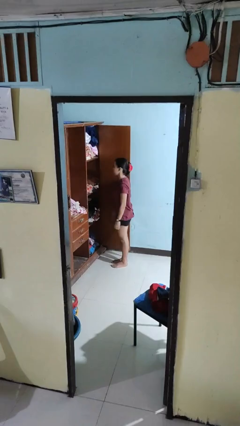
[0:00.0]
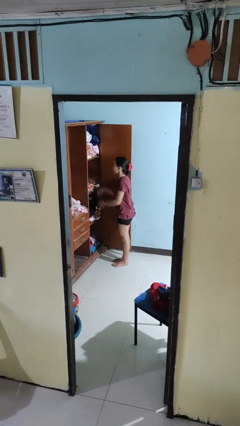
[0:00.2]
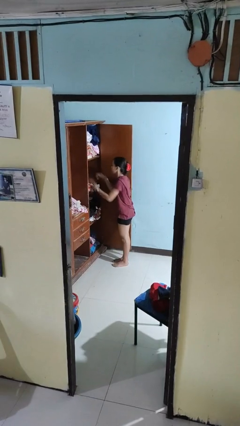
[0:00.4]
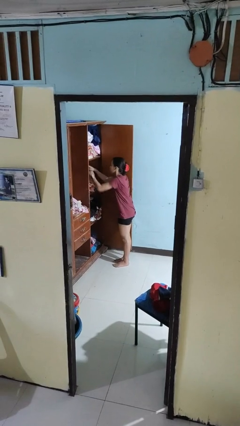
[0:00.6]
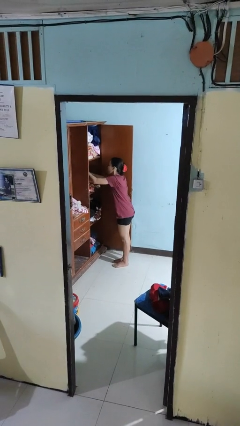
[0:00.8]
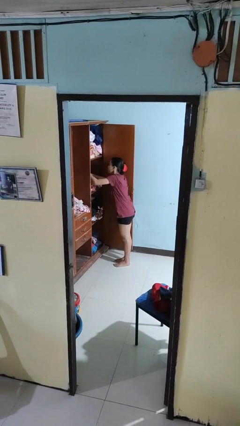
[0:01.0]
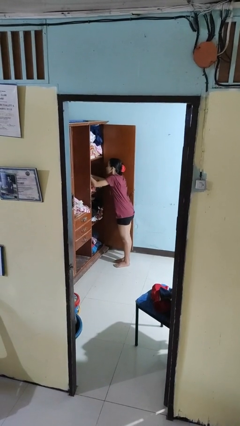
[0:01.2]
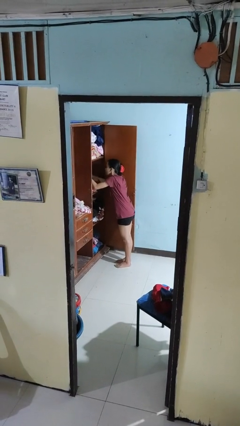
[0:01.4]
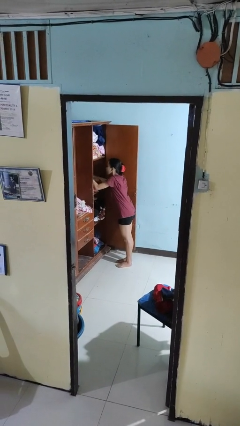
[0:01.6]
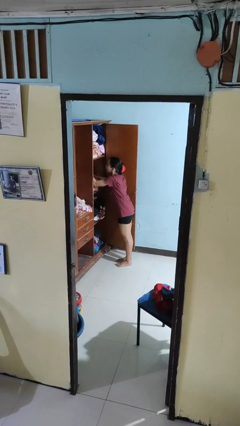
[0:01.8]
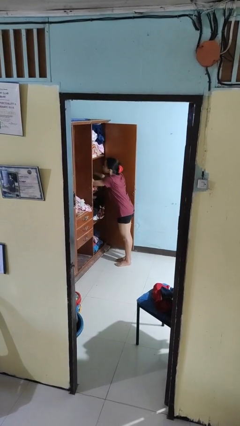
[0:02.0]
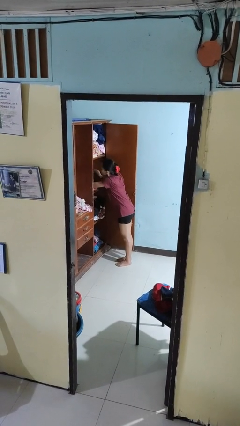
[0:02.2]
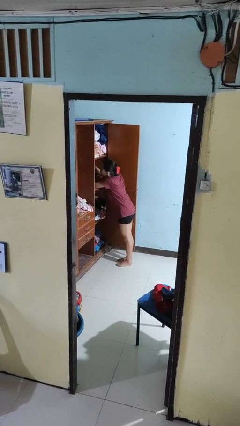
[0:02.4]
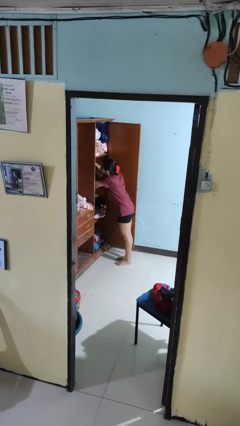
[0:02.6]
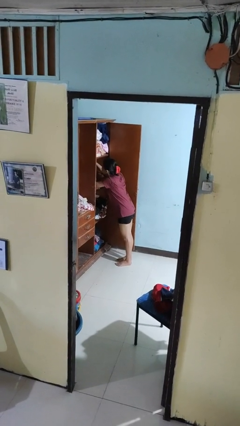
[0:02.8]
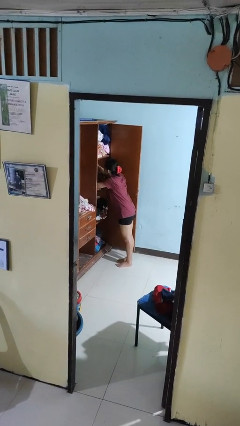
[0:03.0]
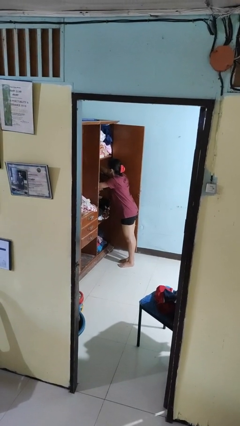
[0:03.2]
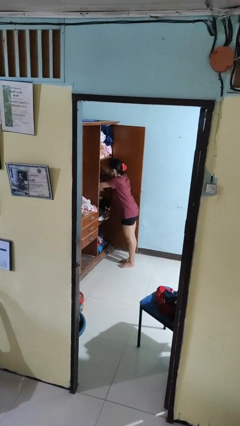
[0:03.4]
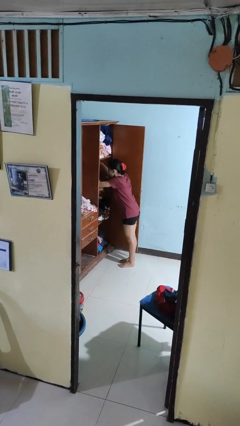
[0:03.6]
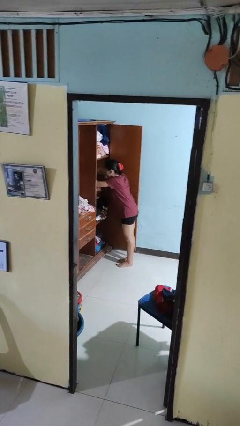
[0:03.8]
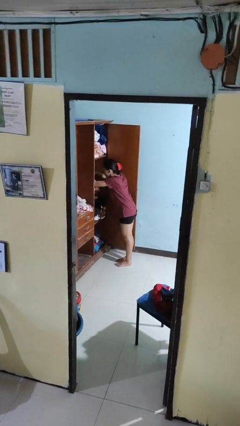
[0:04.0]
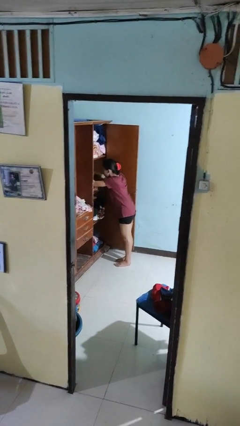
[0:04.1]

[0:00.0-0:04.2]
person searches in cabinet

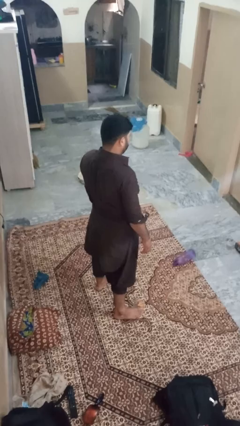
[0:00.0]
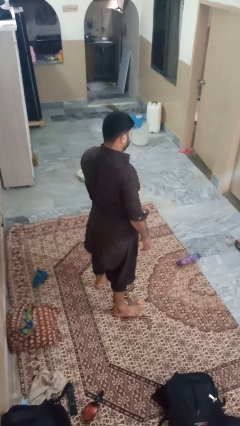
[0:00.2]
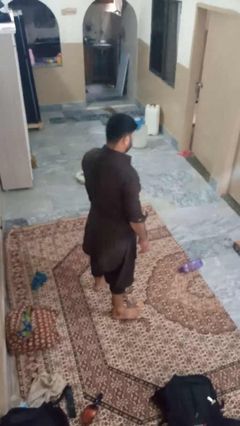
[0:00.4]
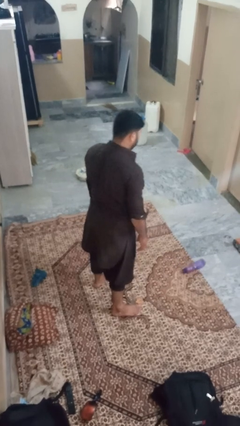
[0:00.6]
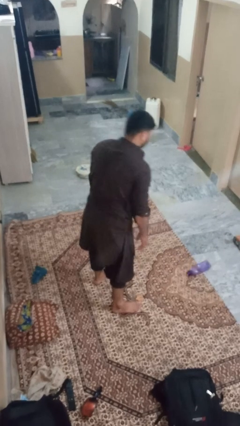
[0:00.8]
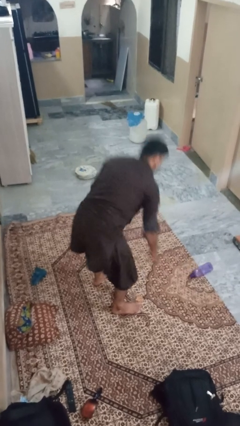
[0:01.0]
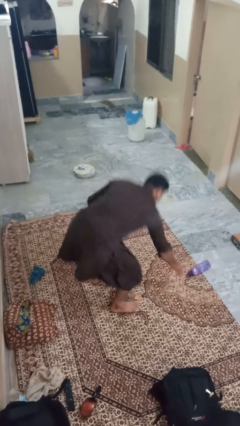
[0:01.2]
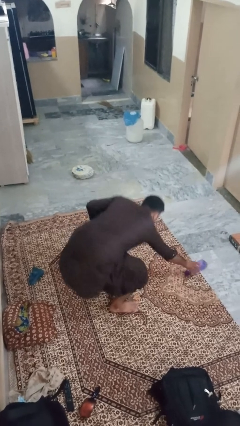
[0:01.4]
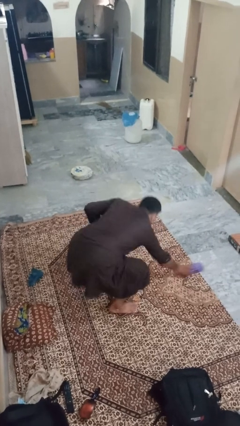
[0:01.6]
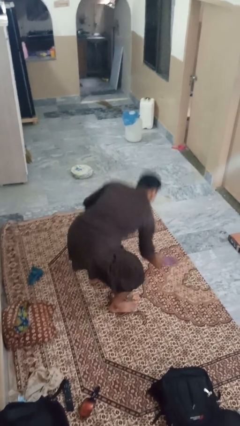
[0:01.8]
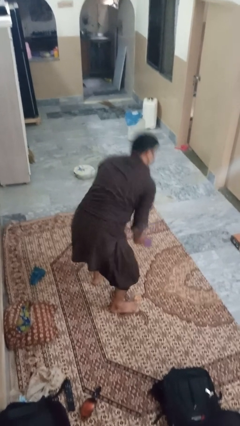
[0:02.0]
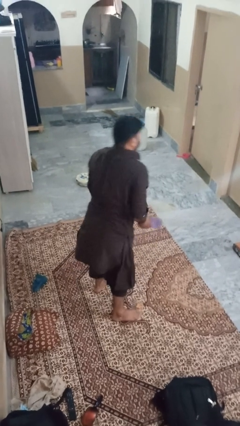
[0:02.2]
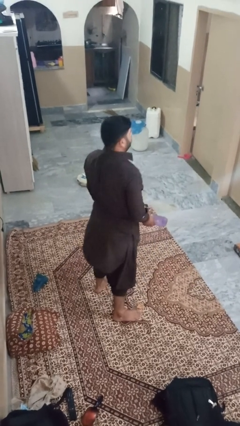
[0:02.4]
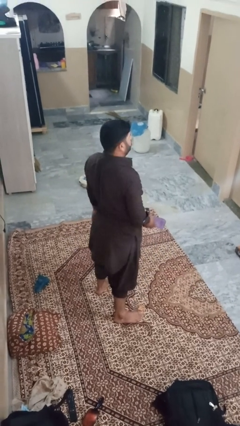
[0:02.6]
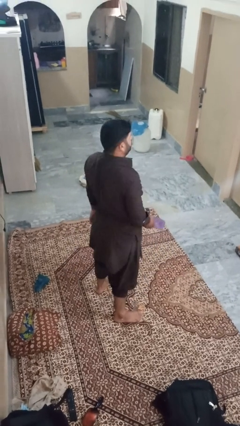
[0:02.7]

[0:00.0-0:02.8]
person picks up object from floor

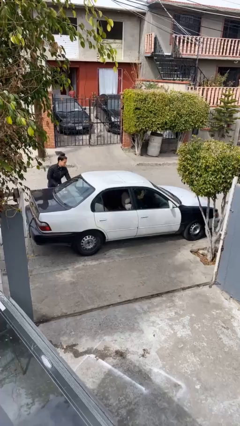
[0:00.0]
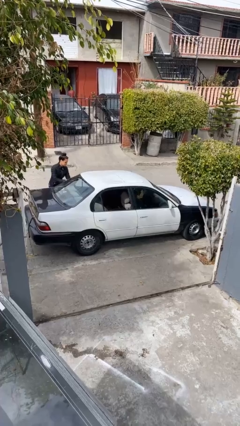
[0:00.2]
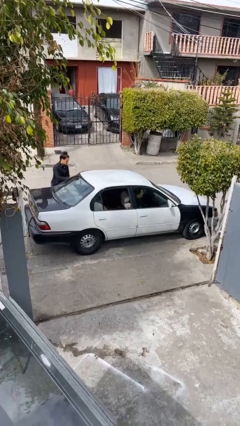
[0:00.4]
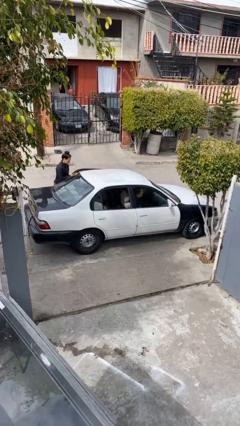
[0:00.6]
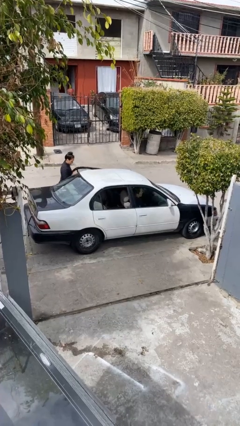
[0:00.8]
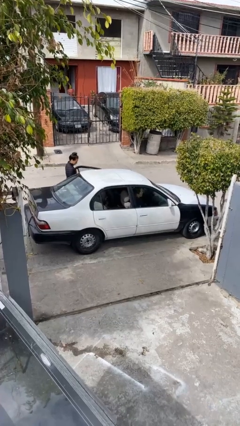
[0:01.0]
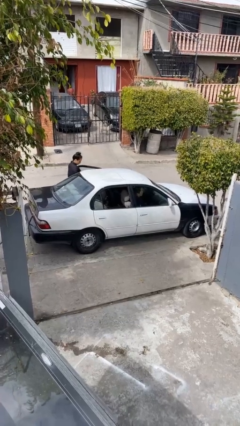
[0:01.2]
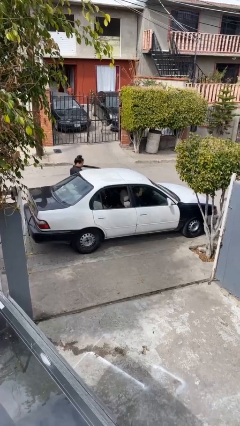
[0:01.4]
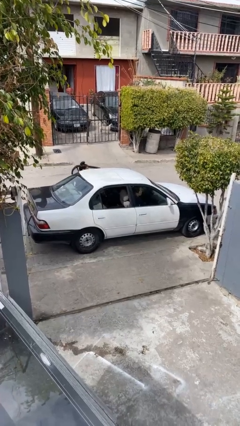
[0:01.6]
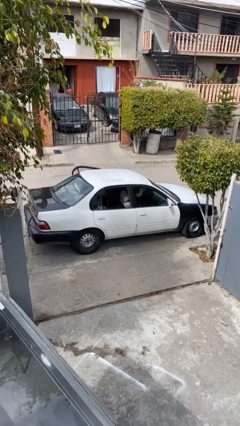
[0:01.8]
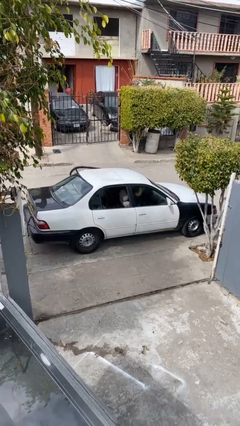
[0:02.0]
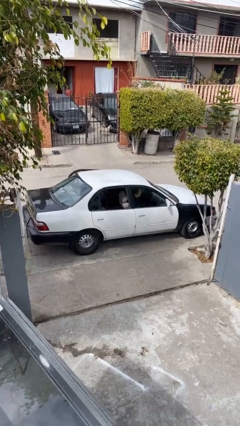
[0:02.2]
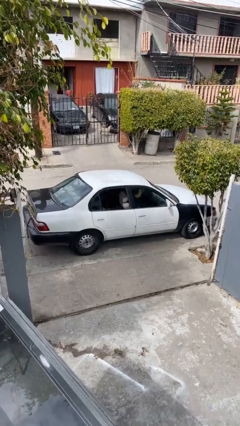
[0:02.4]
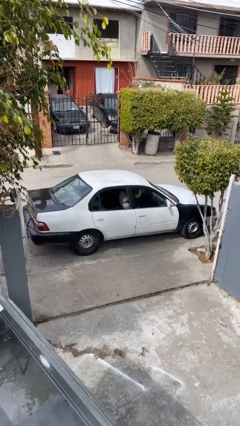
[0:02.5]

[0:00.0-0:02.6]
car picks up person

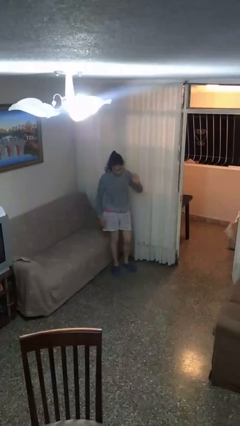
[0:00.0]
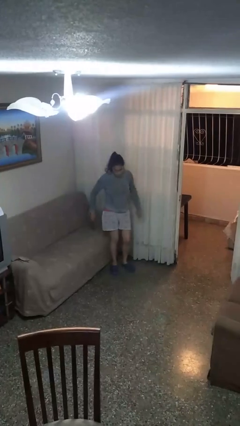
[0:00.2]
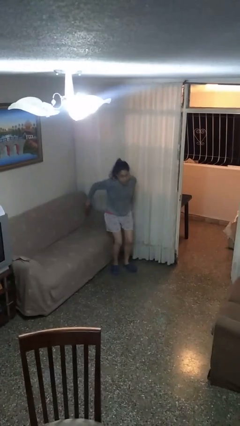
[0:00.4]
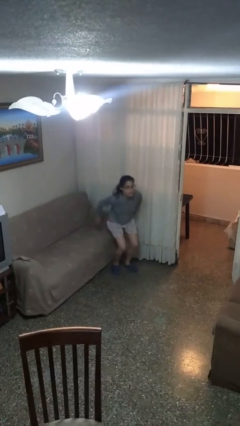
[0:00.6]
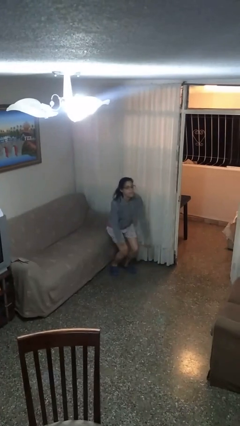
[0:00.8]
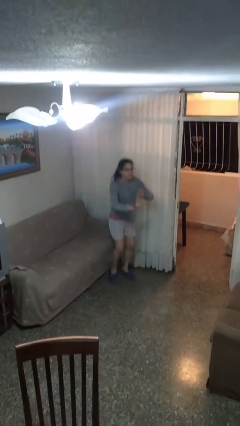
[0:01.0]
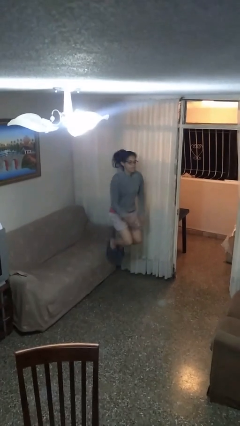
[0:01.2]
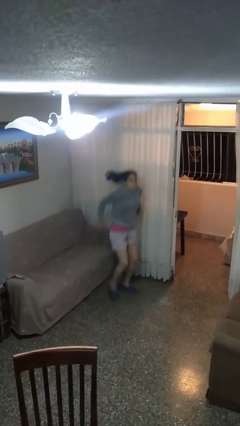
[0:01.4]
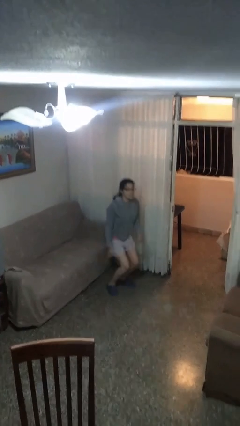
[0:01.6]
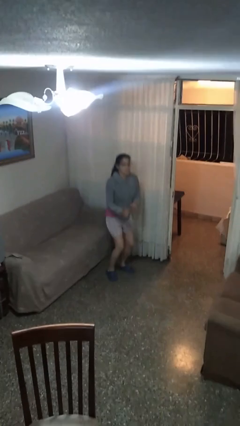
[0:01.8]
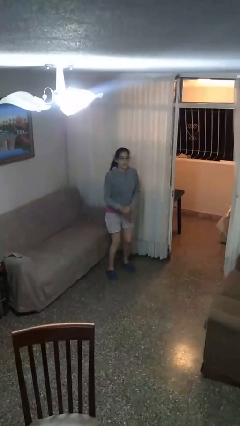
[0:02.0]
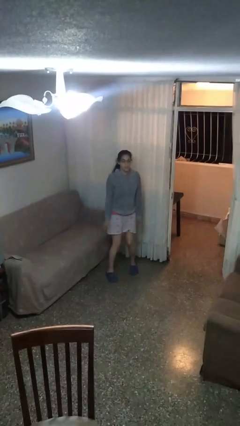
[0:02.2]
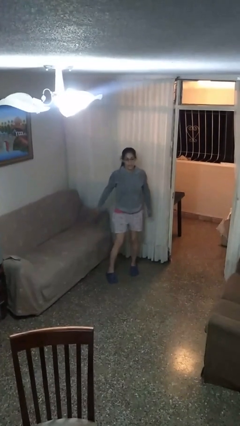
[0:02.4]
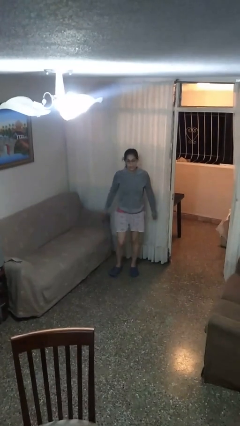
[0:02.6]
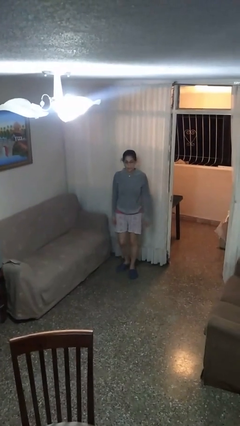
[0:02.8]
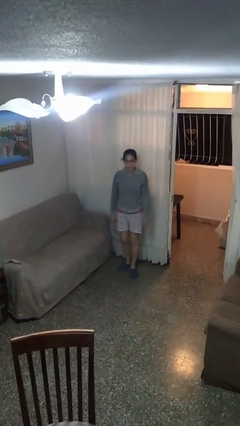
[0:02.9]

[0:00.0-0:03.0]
person jumps

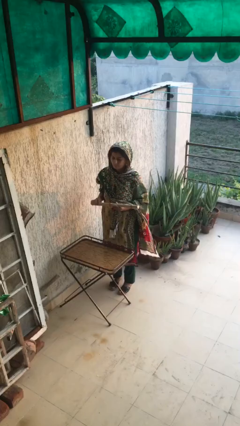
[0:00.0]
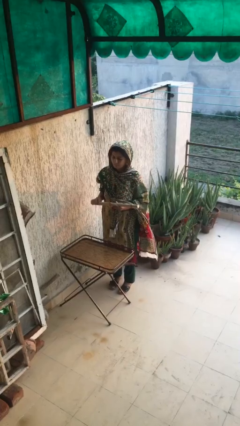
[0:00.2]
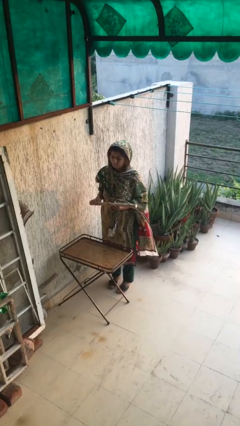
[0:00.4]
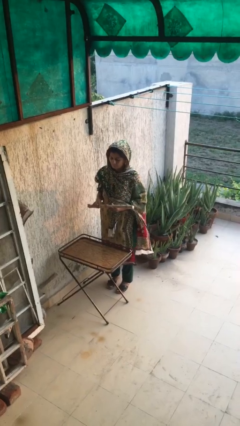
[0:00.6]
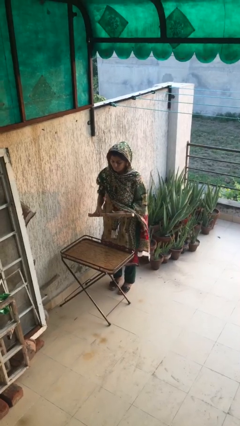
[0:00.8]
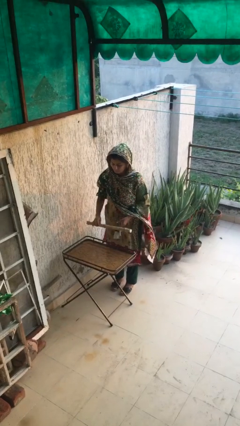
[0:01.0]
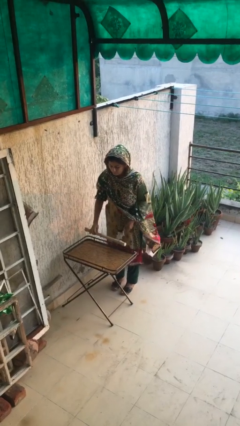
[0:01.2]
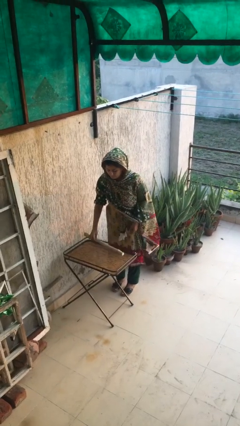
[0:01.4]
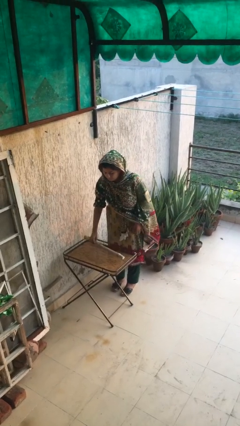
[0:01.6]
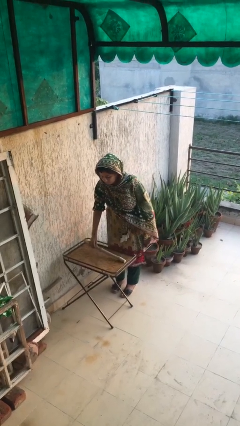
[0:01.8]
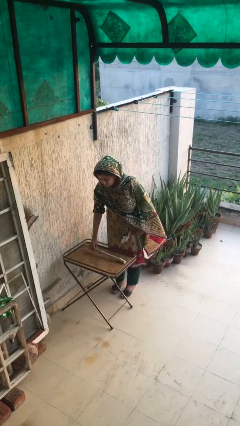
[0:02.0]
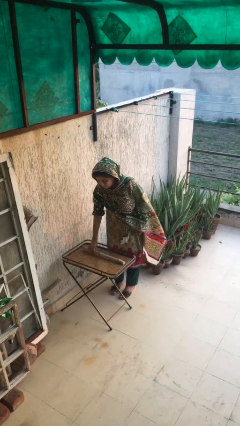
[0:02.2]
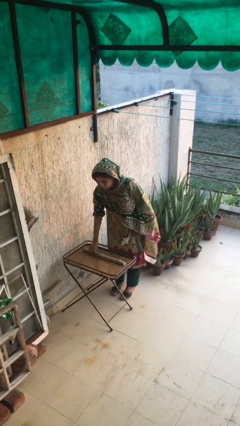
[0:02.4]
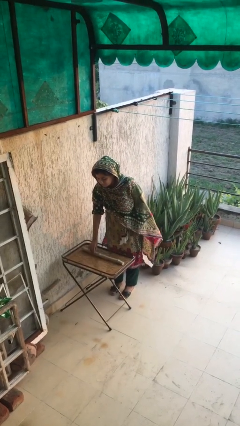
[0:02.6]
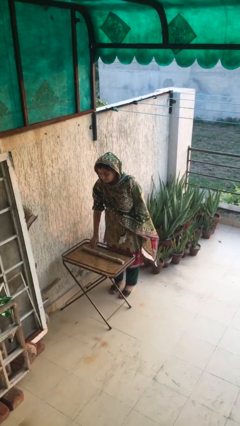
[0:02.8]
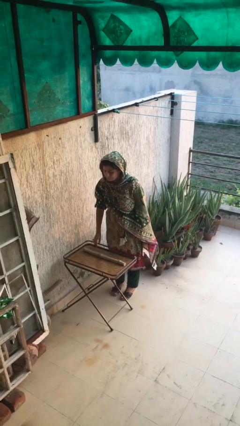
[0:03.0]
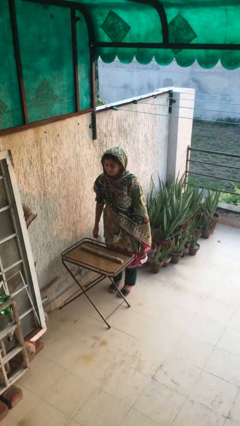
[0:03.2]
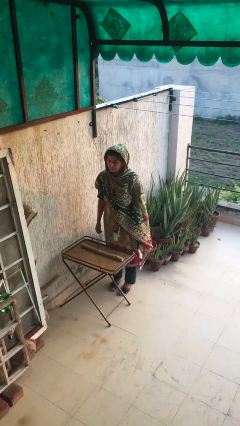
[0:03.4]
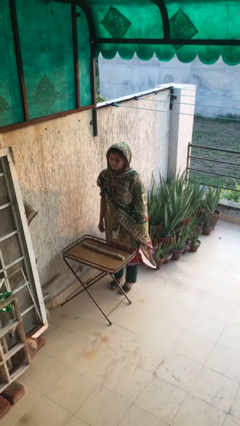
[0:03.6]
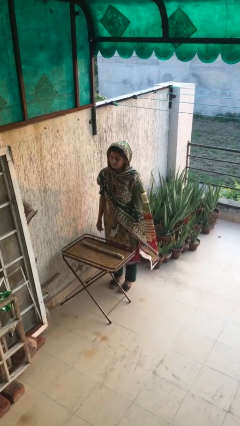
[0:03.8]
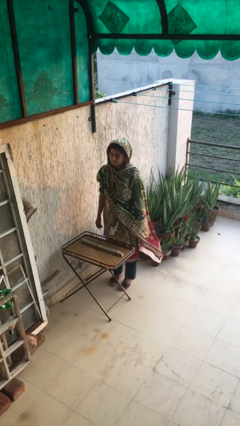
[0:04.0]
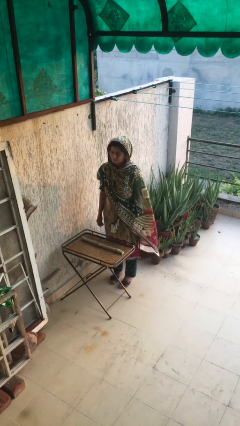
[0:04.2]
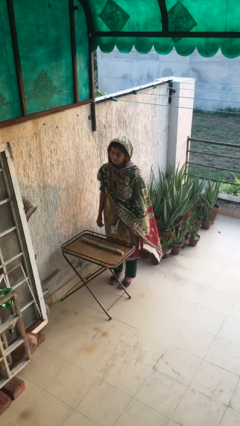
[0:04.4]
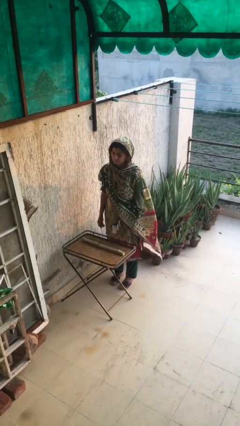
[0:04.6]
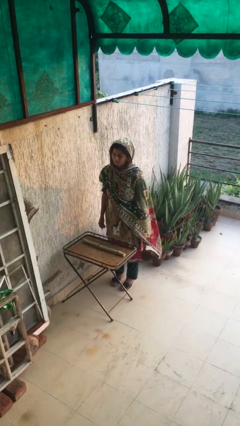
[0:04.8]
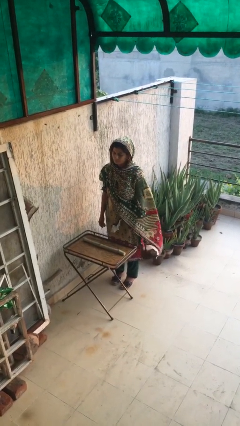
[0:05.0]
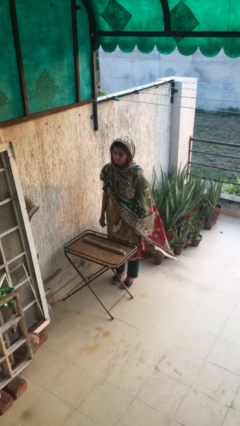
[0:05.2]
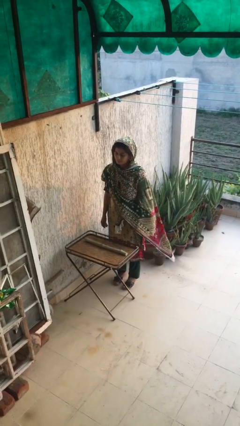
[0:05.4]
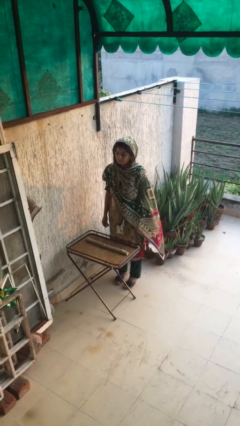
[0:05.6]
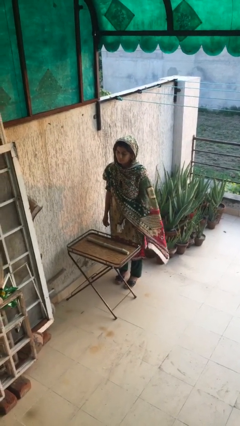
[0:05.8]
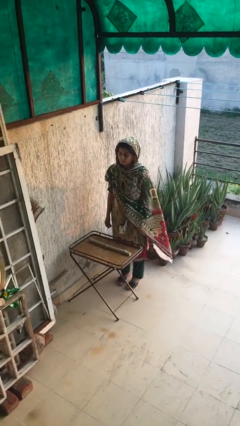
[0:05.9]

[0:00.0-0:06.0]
person puts down object on table
